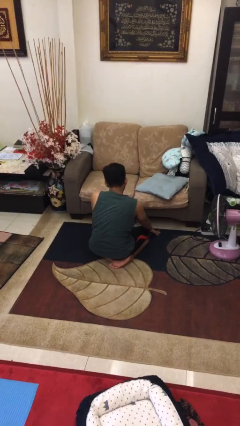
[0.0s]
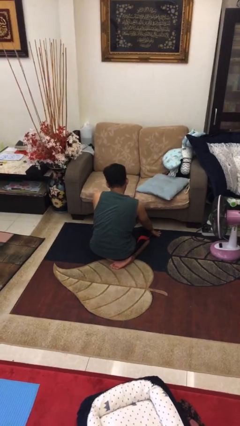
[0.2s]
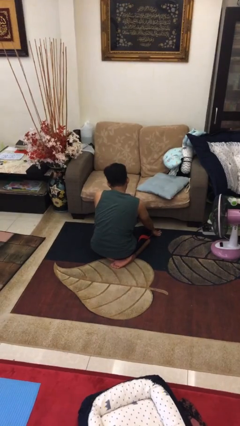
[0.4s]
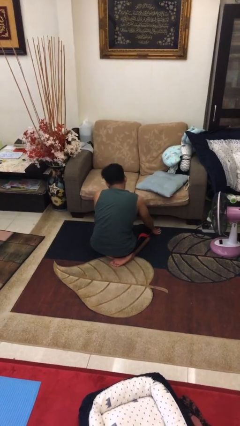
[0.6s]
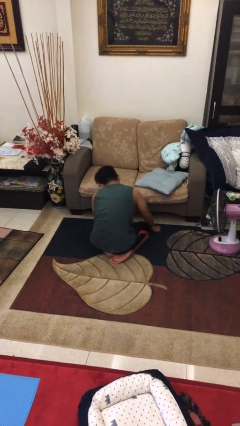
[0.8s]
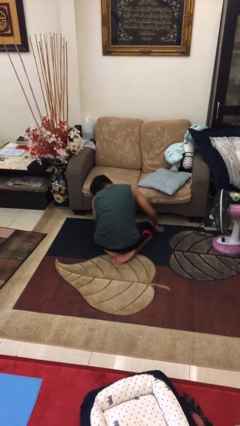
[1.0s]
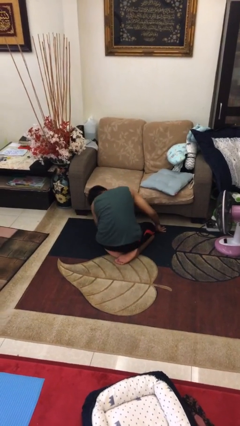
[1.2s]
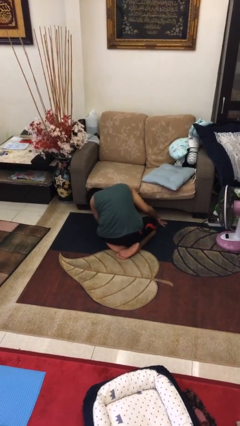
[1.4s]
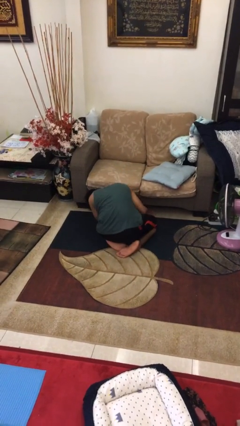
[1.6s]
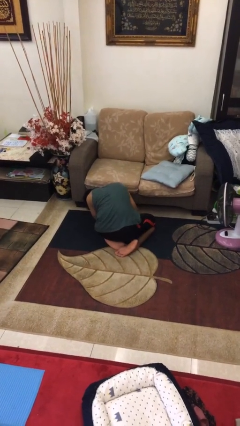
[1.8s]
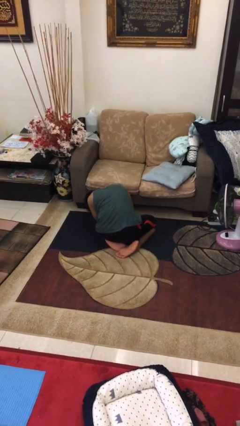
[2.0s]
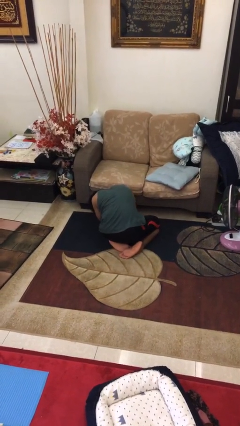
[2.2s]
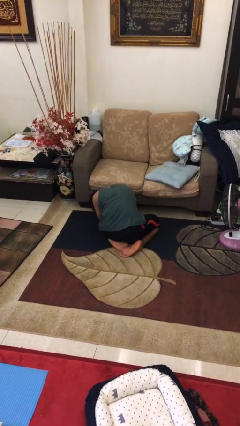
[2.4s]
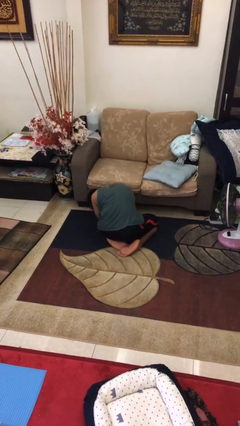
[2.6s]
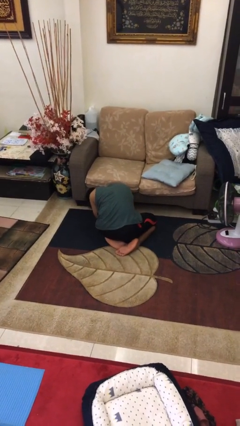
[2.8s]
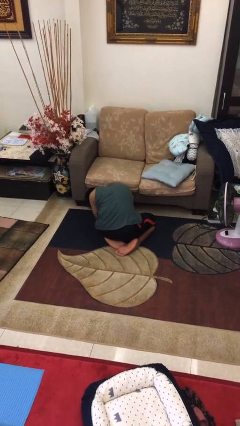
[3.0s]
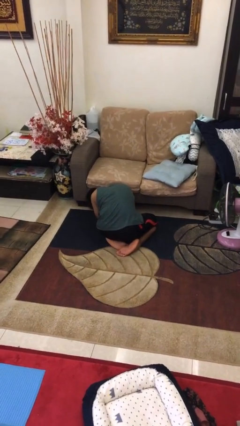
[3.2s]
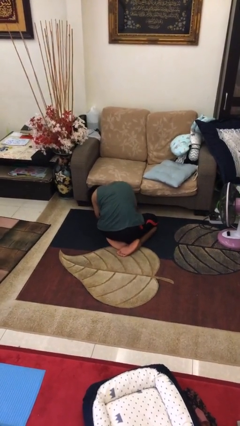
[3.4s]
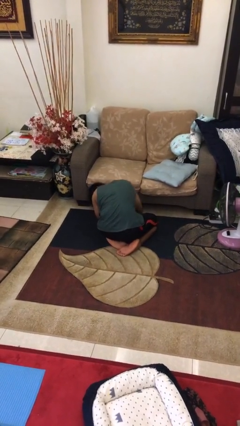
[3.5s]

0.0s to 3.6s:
person searches under couch

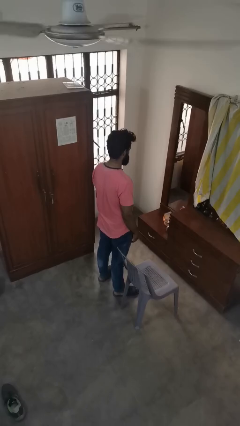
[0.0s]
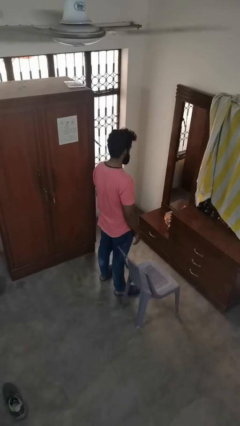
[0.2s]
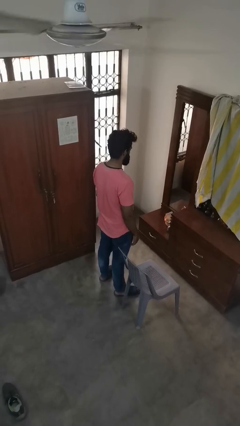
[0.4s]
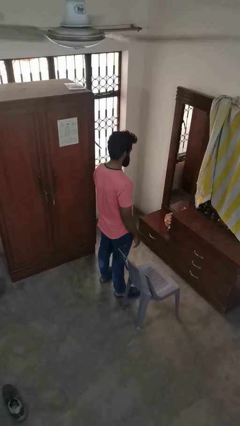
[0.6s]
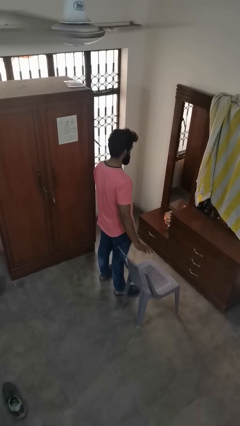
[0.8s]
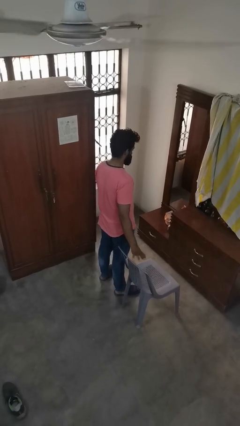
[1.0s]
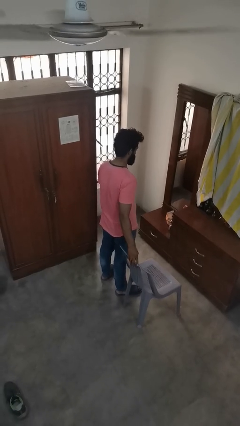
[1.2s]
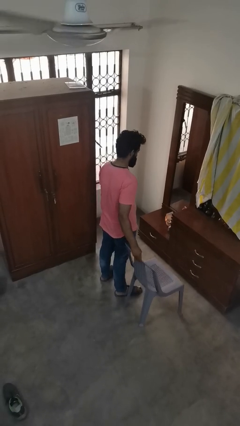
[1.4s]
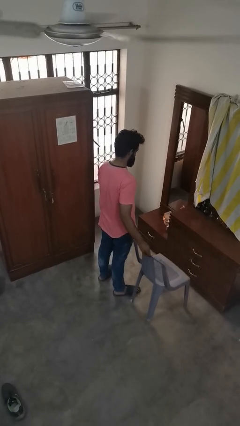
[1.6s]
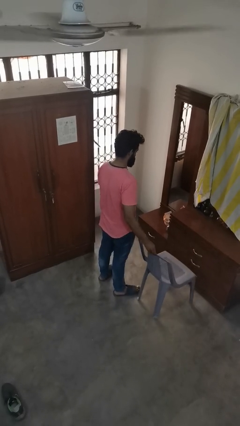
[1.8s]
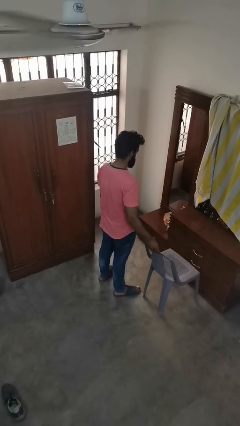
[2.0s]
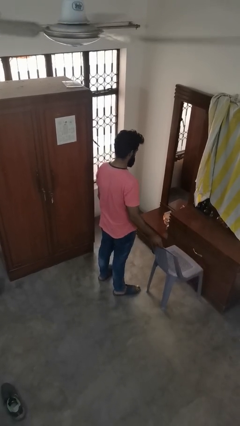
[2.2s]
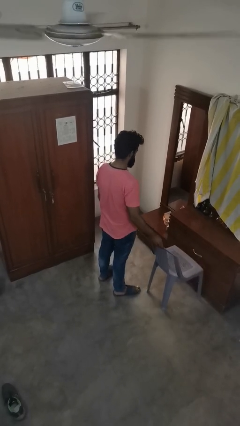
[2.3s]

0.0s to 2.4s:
person pushes in chair

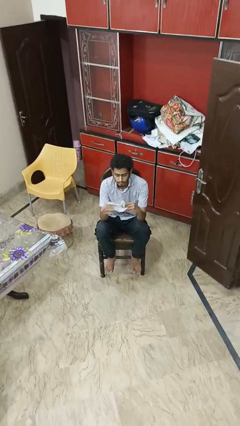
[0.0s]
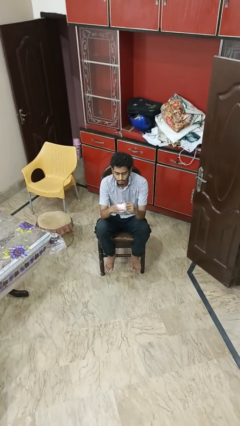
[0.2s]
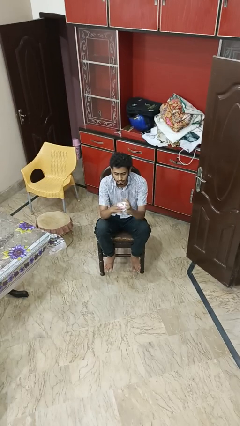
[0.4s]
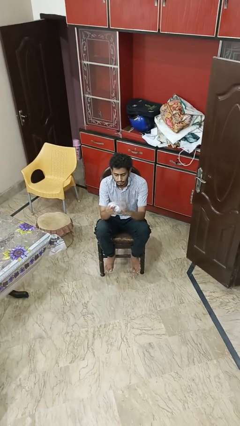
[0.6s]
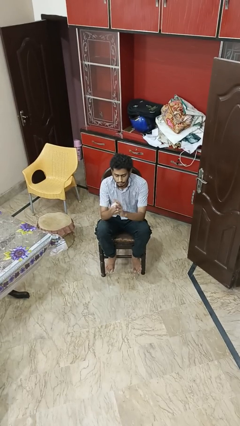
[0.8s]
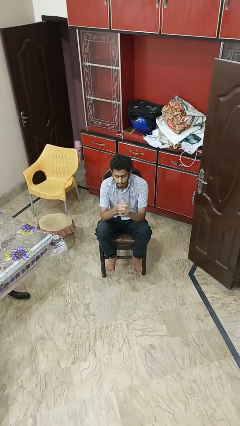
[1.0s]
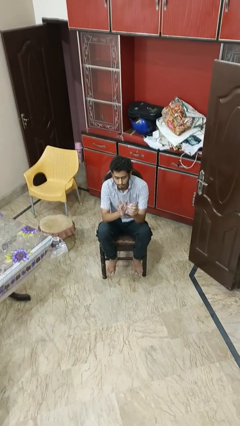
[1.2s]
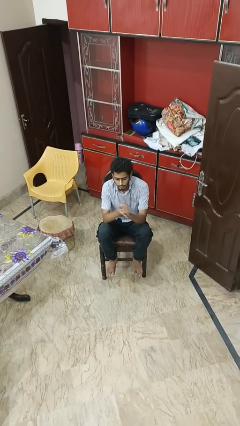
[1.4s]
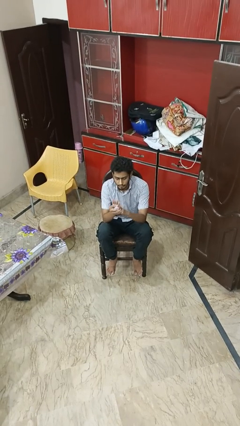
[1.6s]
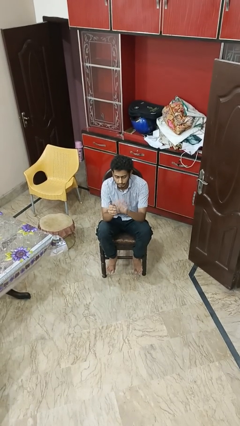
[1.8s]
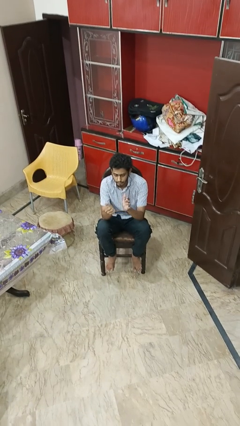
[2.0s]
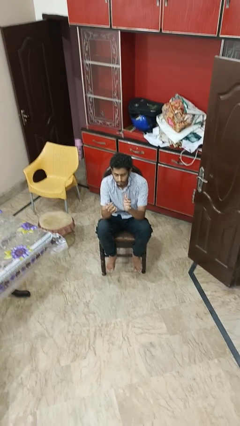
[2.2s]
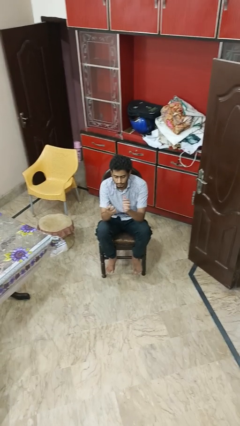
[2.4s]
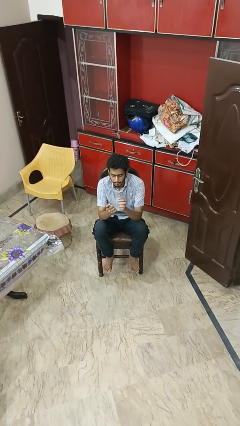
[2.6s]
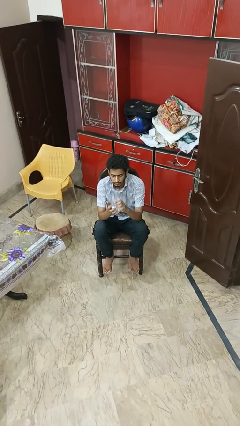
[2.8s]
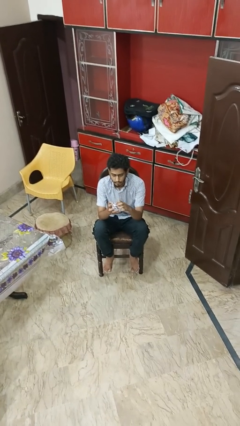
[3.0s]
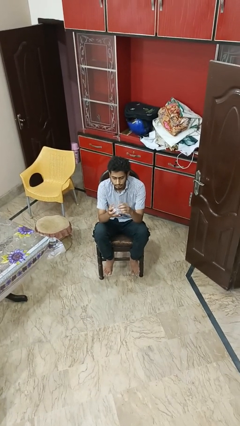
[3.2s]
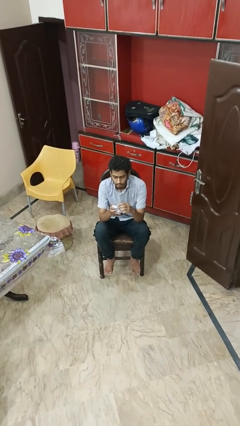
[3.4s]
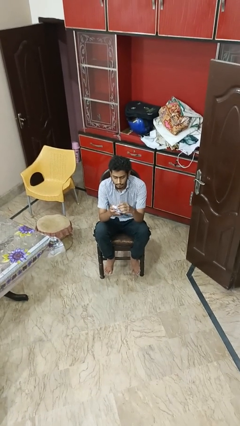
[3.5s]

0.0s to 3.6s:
person crumples paper

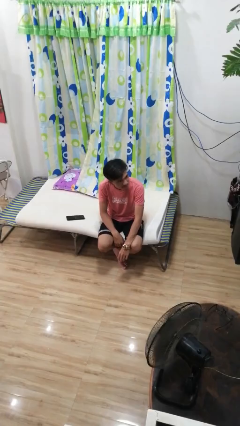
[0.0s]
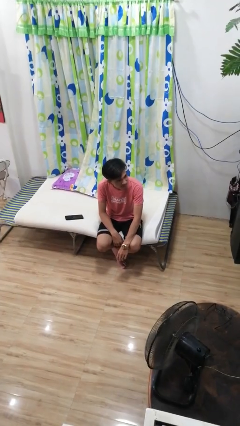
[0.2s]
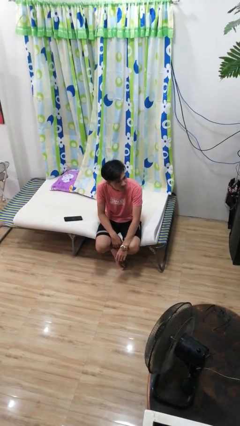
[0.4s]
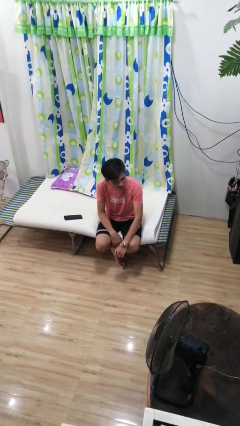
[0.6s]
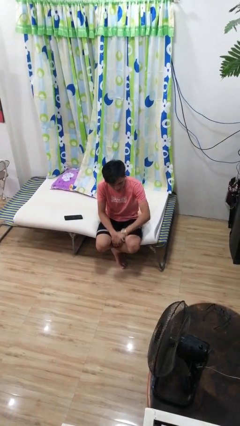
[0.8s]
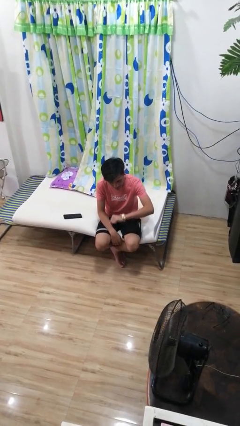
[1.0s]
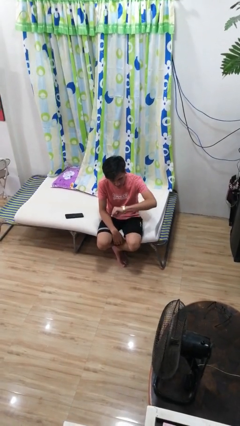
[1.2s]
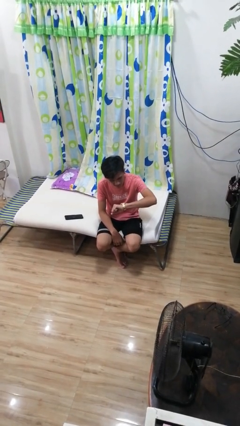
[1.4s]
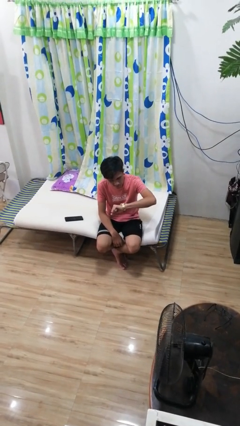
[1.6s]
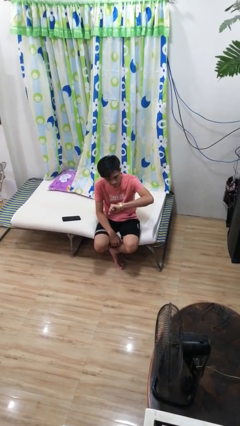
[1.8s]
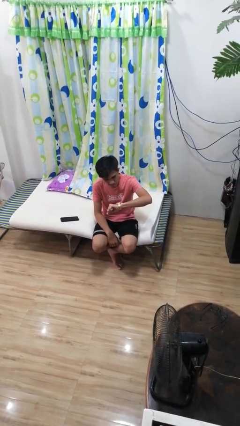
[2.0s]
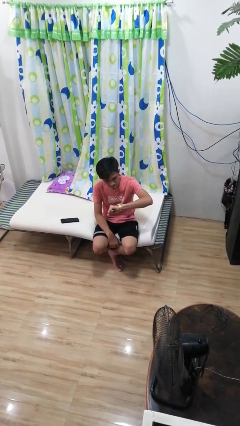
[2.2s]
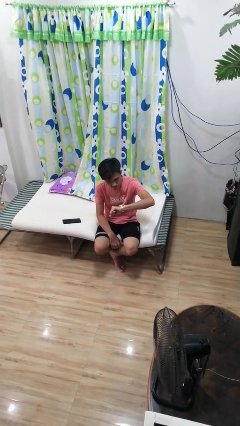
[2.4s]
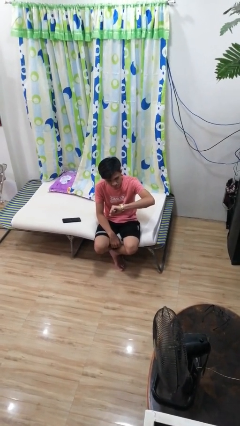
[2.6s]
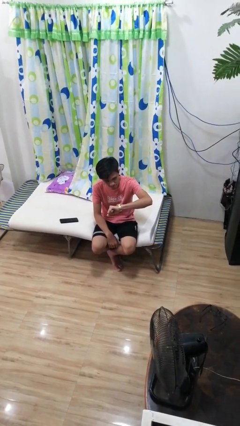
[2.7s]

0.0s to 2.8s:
person looks at wristwatch

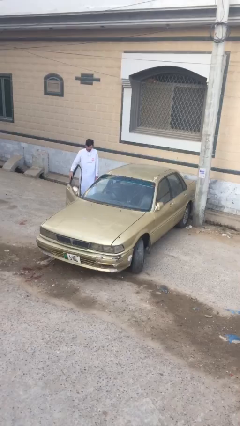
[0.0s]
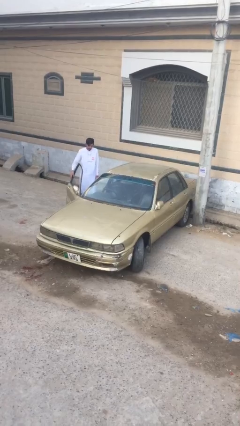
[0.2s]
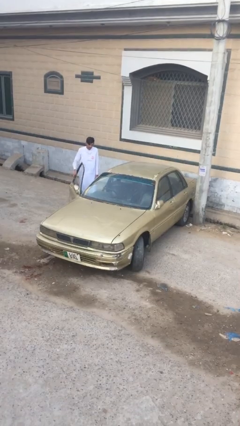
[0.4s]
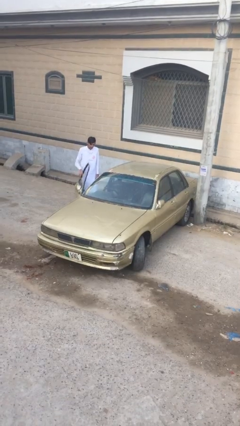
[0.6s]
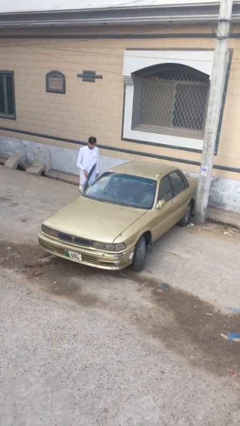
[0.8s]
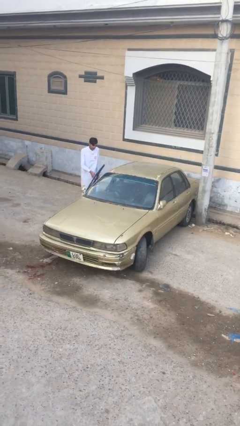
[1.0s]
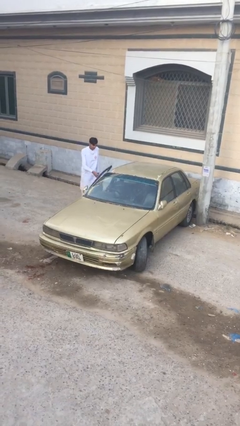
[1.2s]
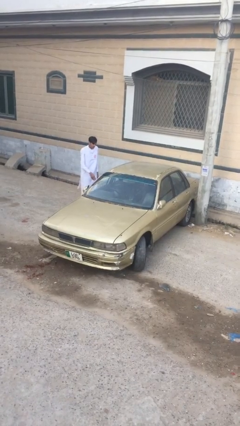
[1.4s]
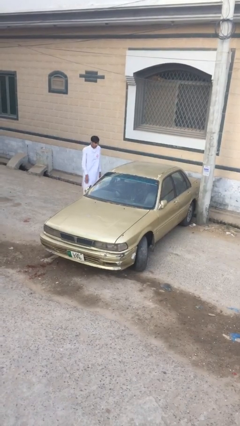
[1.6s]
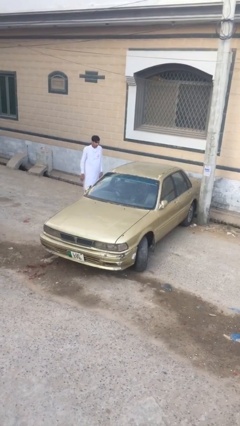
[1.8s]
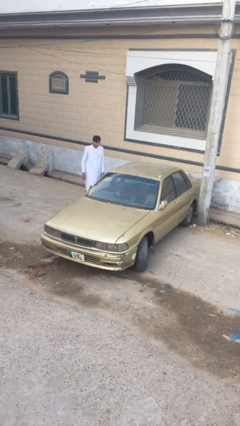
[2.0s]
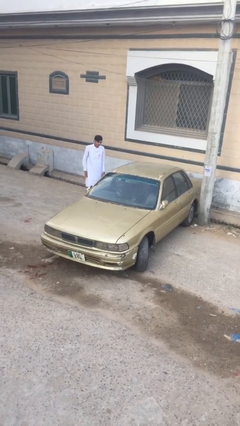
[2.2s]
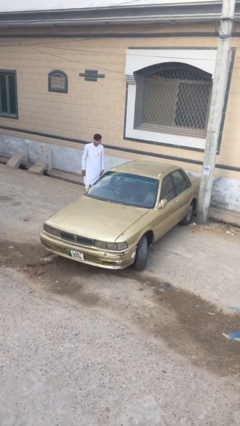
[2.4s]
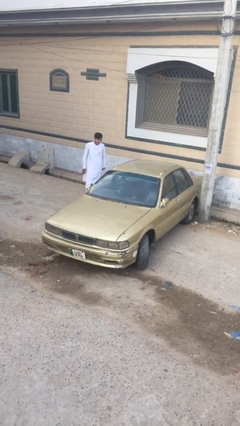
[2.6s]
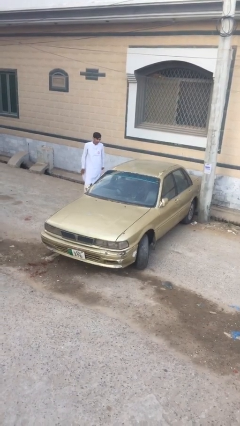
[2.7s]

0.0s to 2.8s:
person closes car door

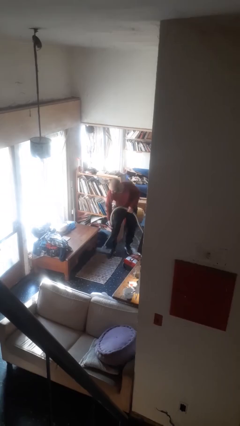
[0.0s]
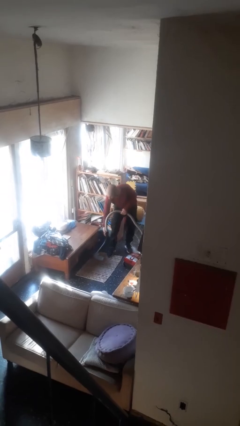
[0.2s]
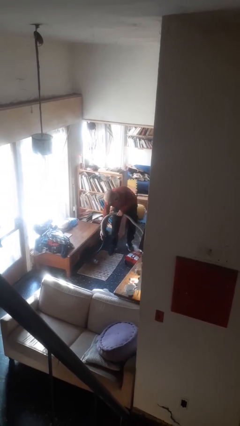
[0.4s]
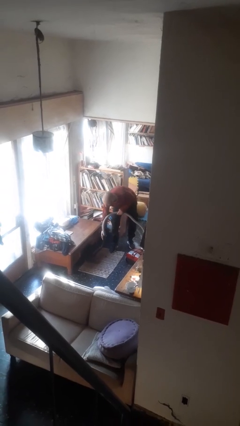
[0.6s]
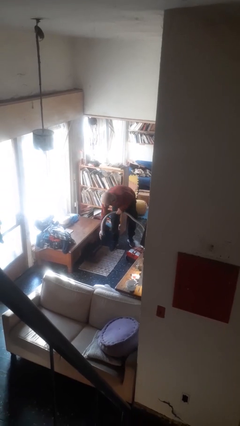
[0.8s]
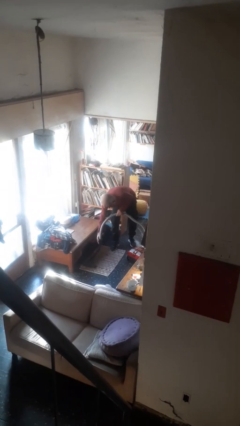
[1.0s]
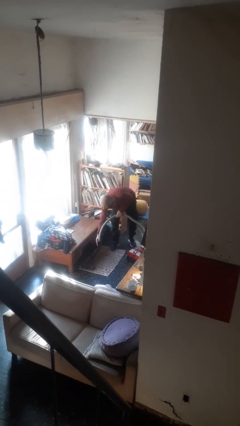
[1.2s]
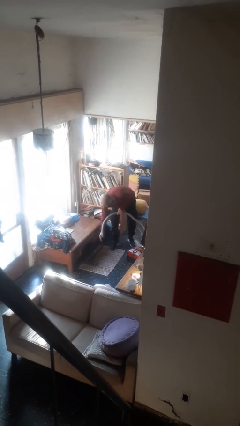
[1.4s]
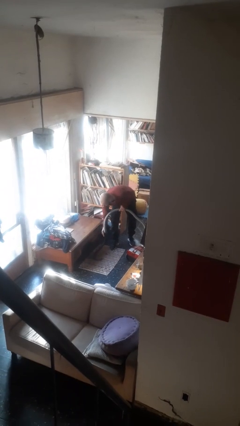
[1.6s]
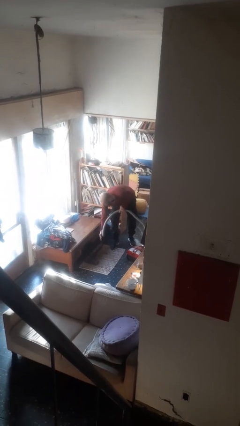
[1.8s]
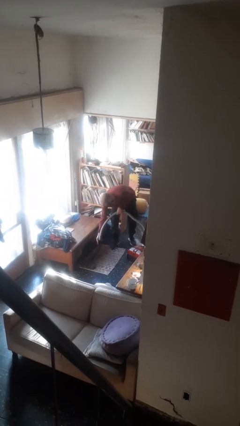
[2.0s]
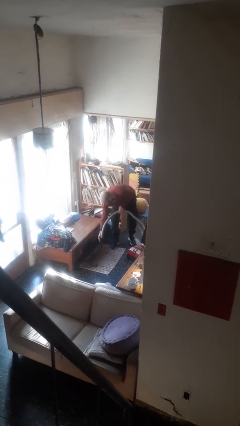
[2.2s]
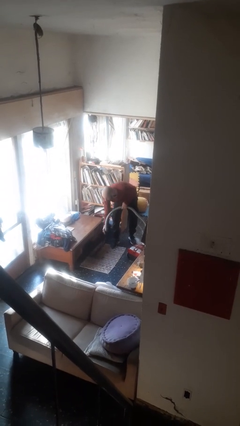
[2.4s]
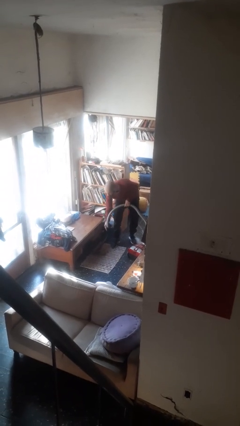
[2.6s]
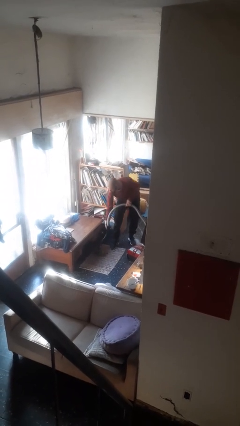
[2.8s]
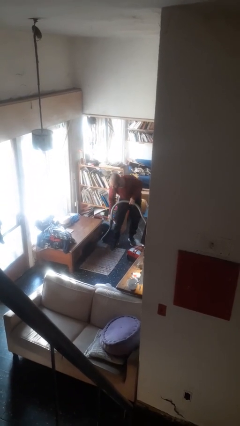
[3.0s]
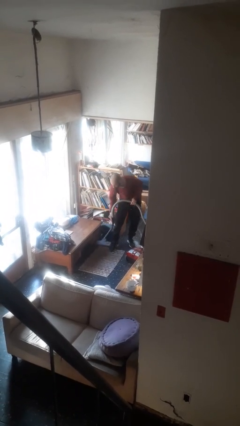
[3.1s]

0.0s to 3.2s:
person vacuums carpet
